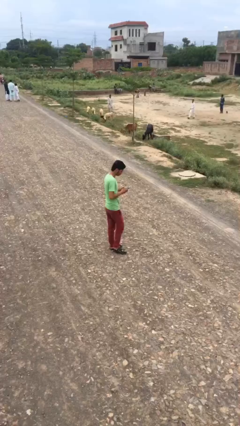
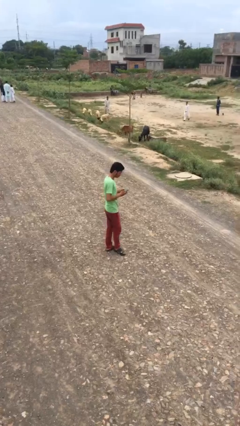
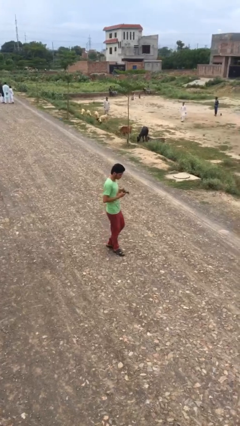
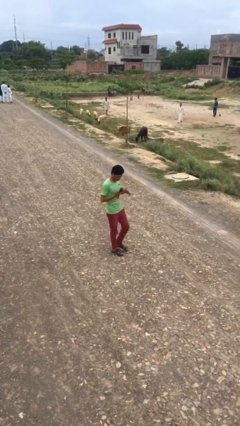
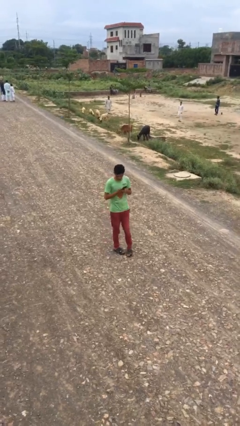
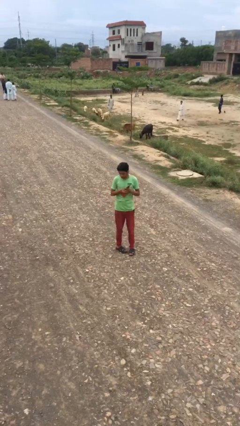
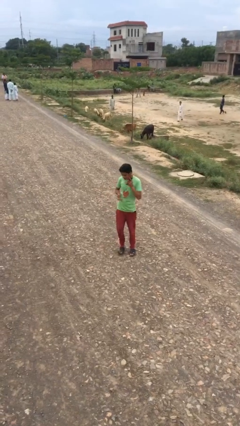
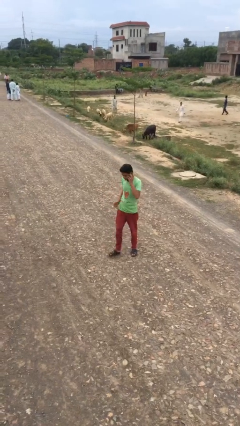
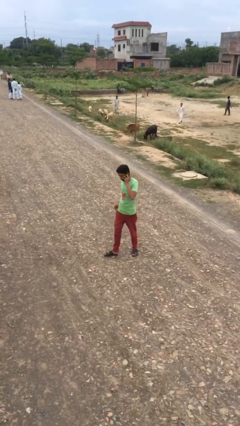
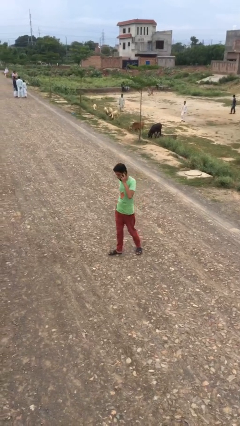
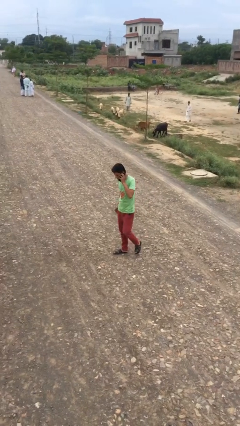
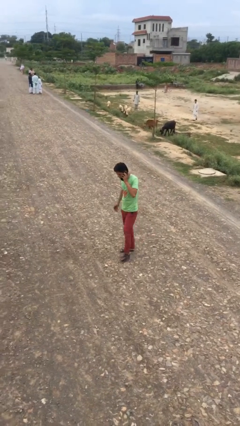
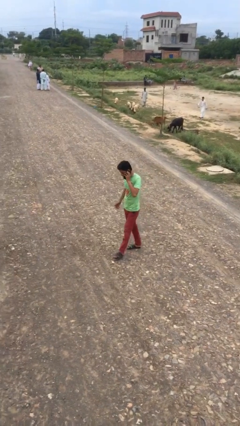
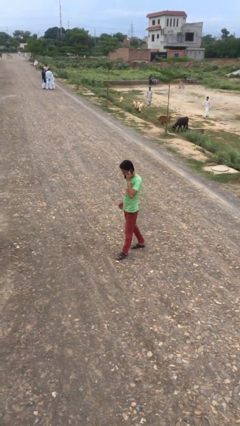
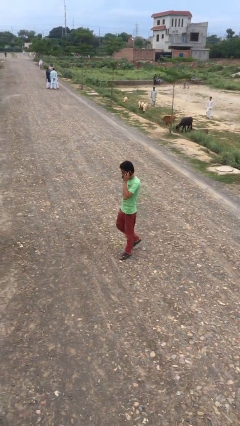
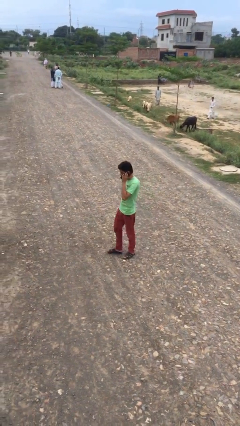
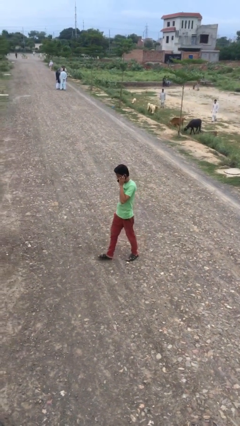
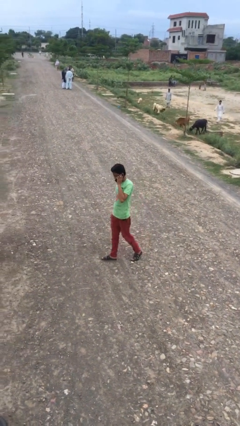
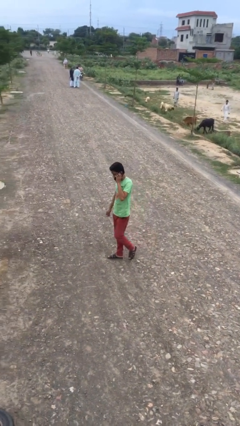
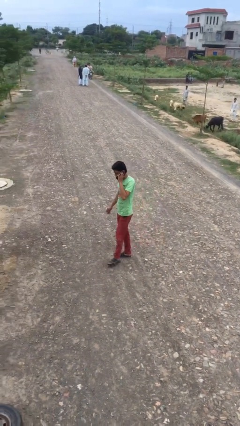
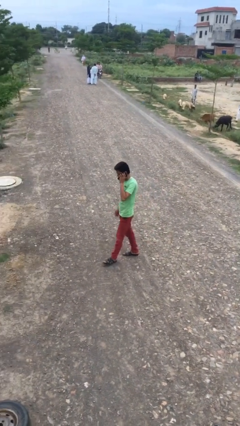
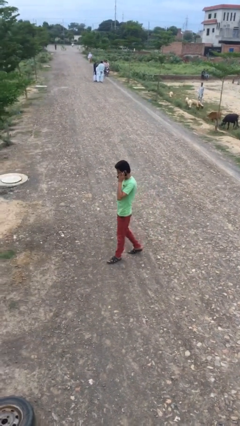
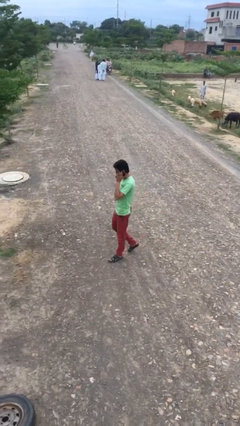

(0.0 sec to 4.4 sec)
person talks on phone

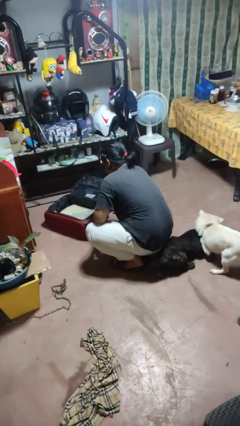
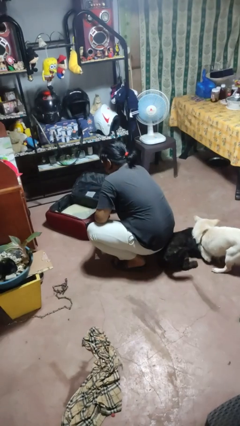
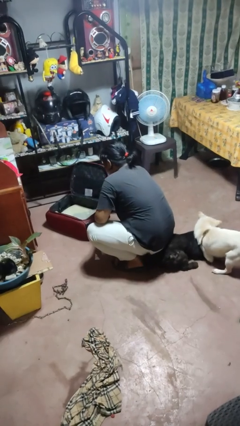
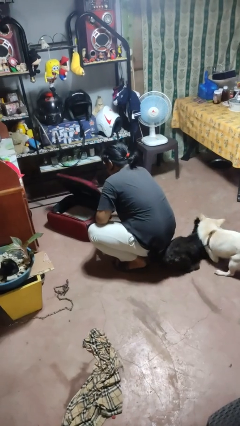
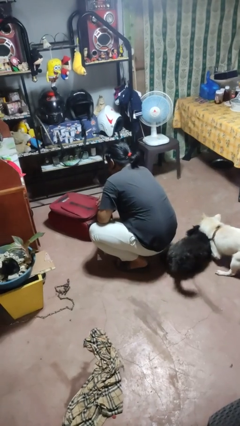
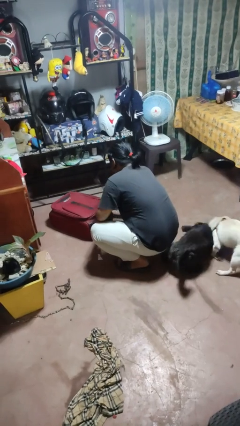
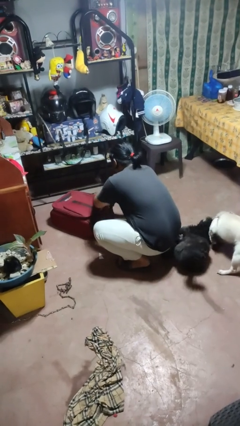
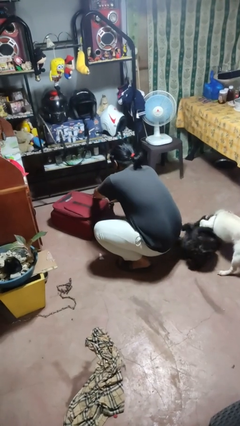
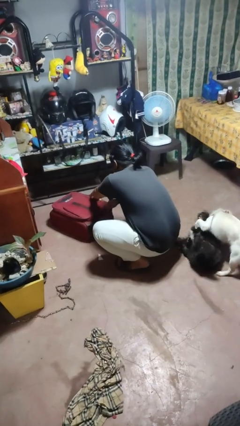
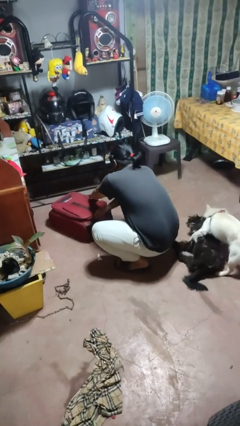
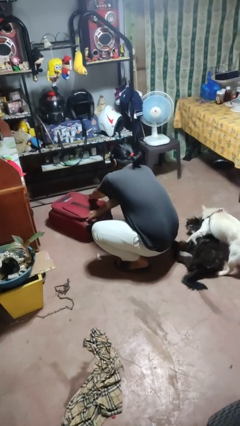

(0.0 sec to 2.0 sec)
person closes suitcase

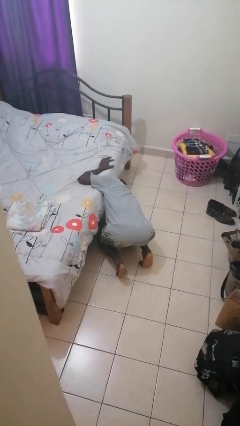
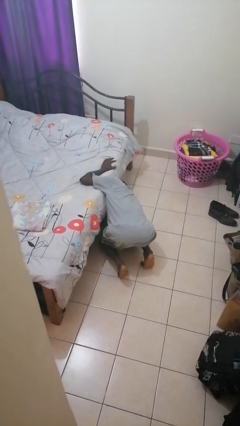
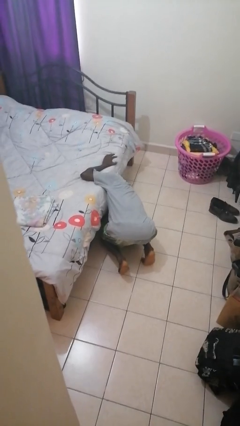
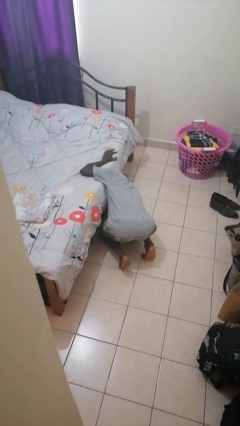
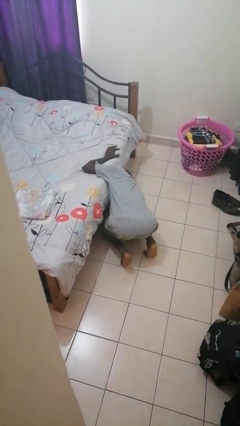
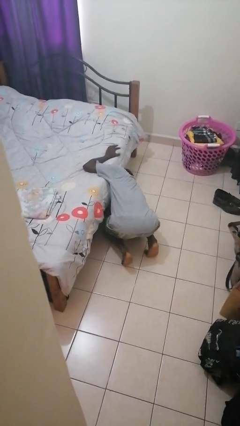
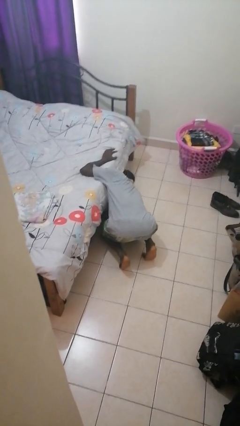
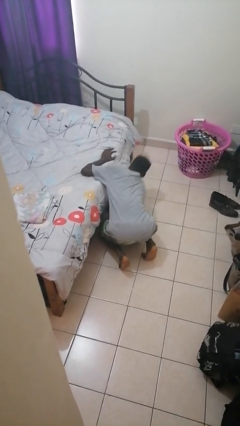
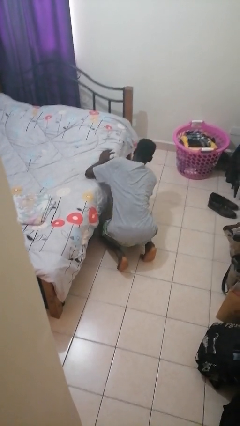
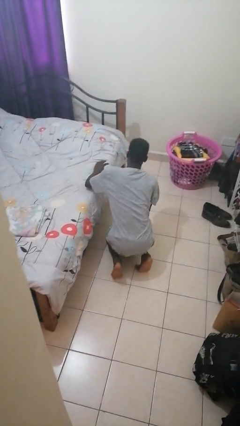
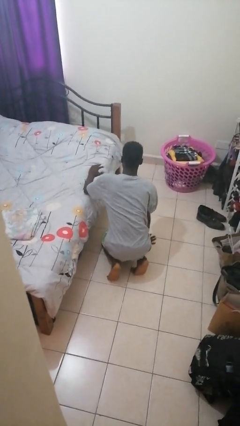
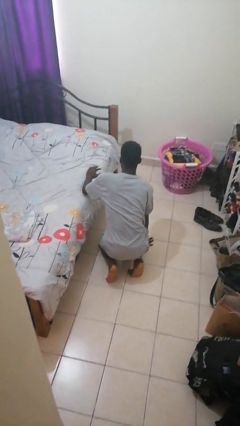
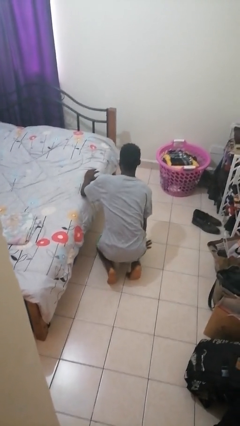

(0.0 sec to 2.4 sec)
person searches under bed

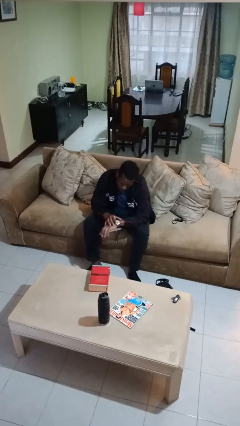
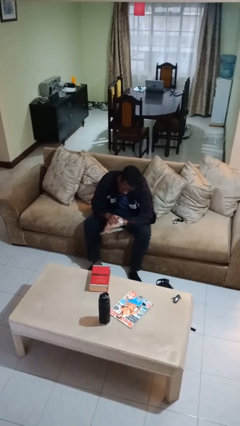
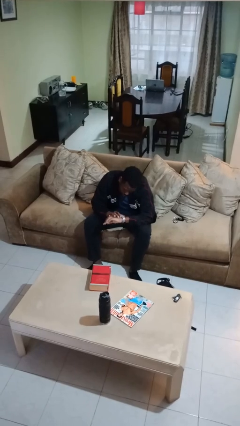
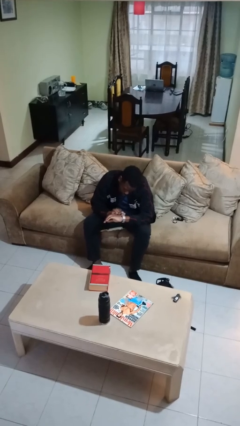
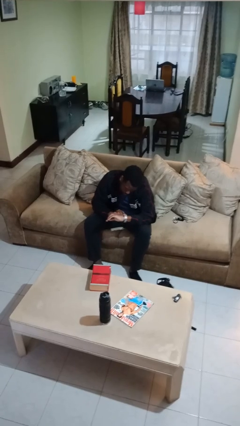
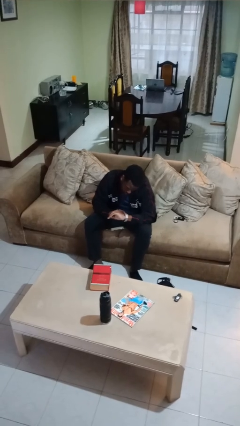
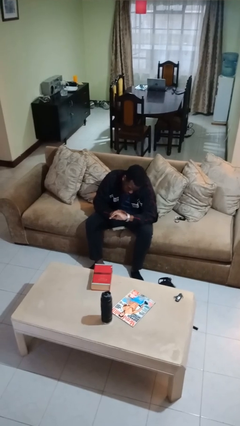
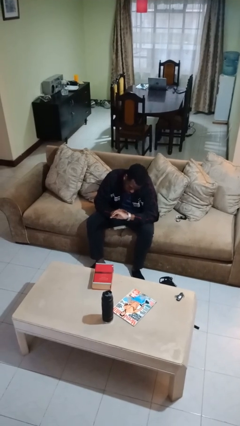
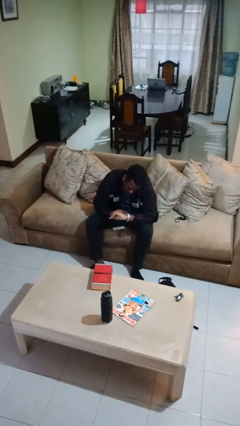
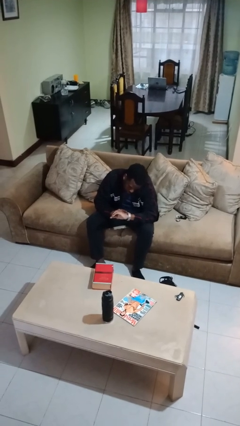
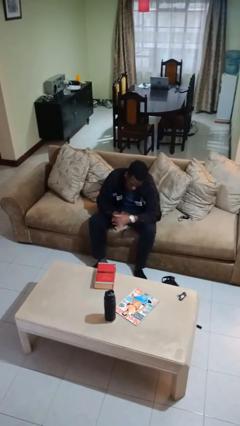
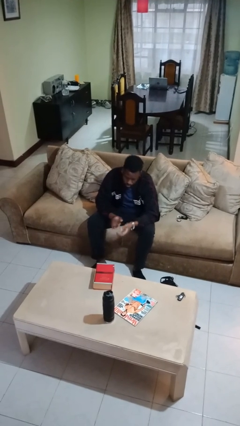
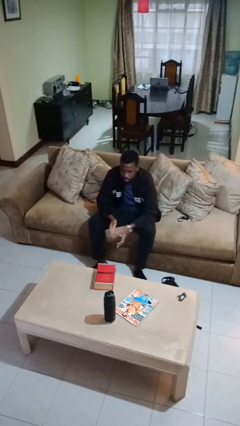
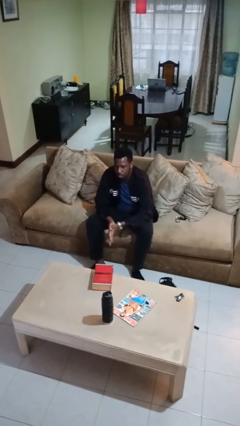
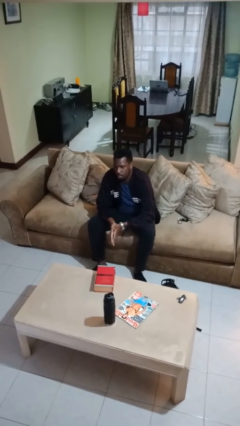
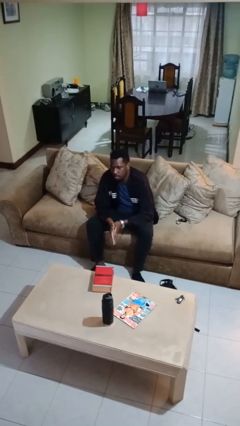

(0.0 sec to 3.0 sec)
person looks at wristwatch

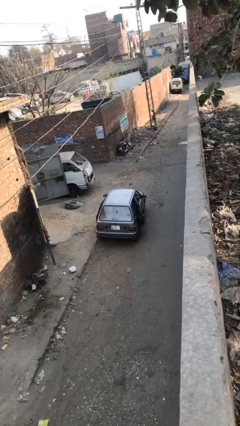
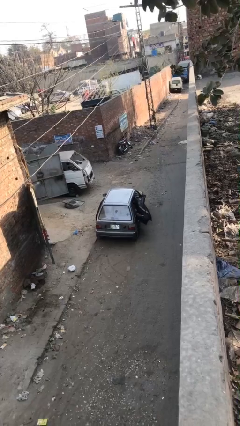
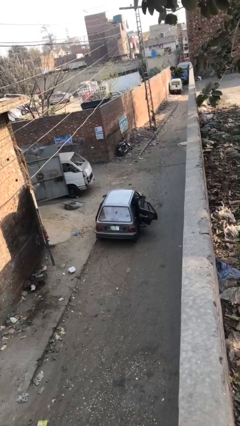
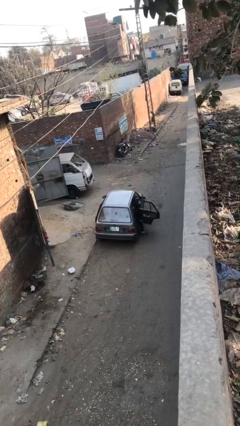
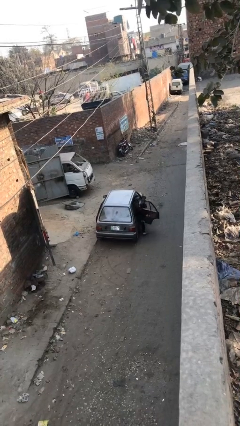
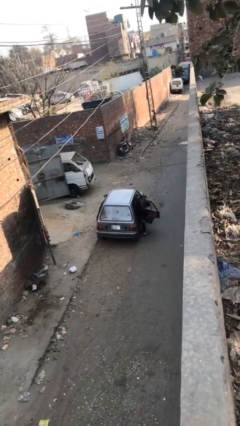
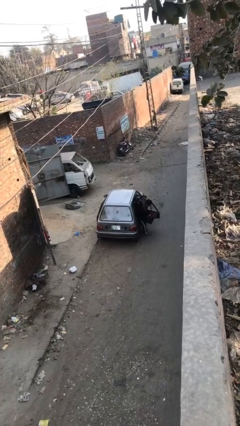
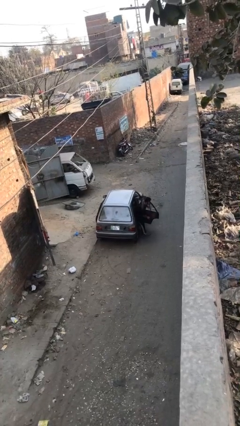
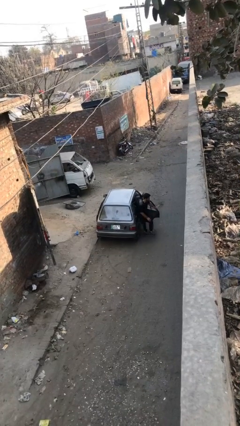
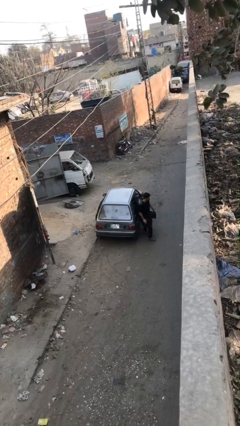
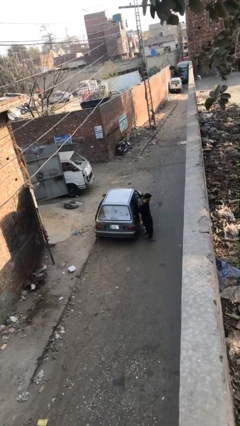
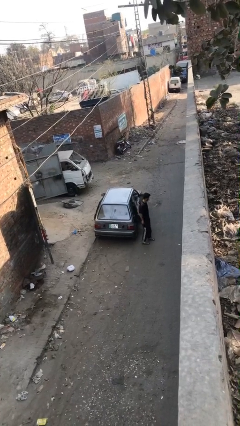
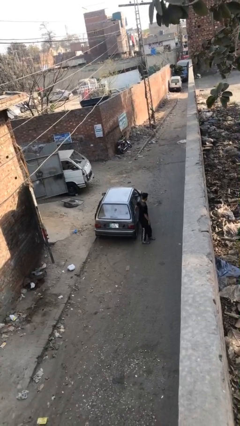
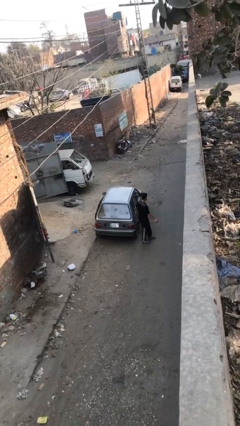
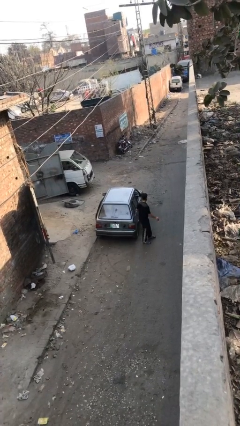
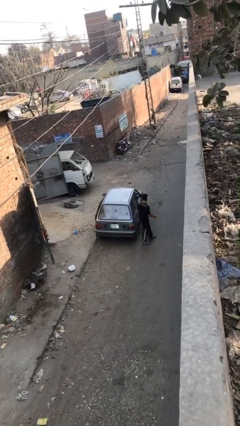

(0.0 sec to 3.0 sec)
car drops off person

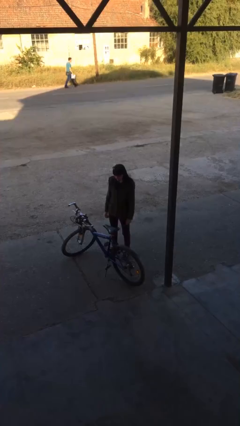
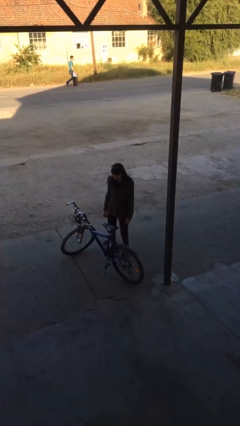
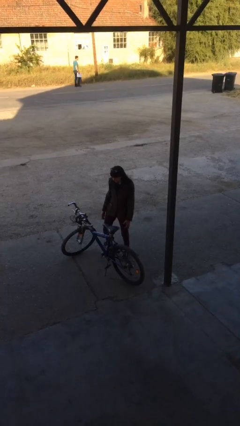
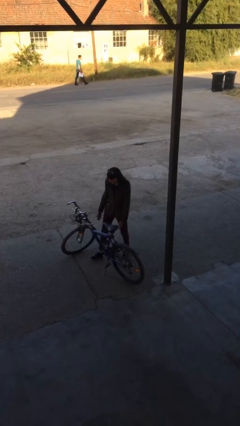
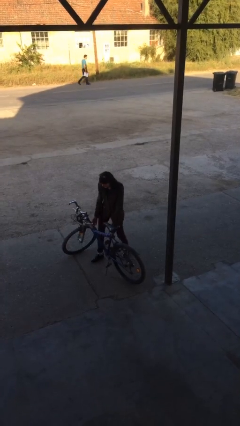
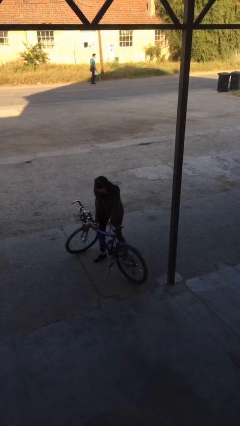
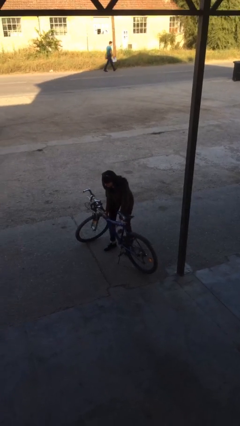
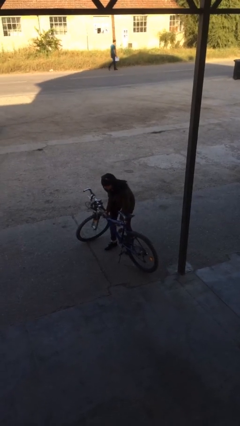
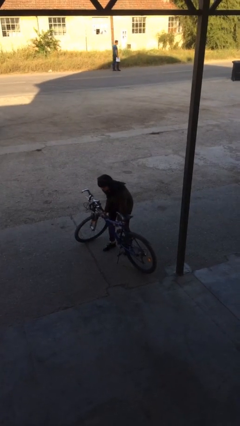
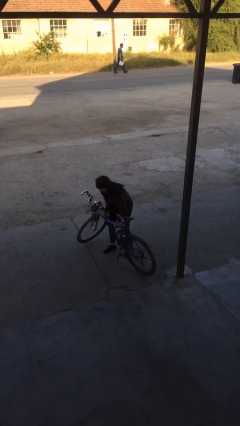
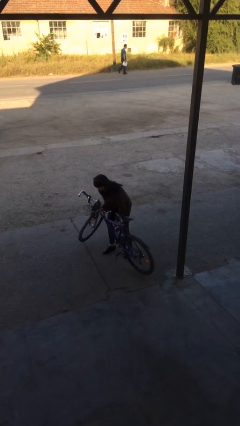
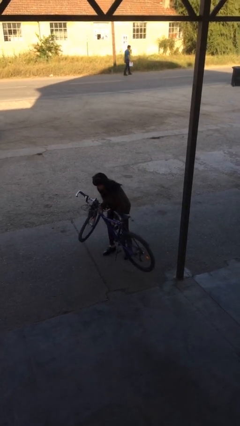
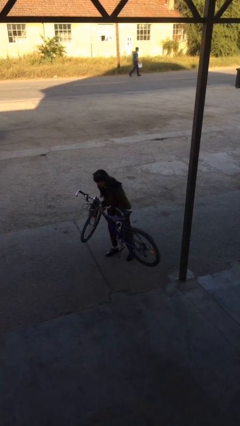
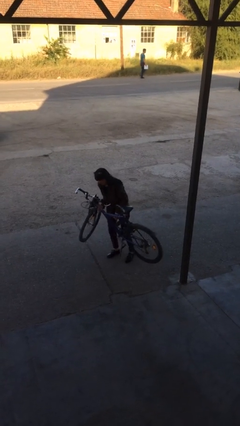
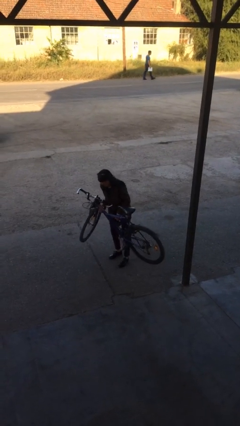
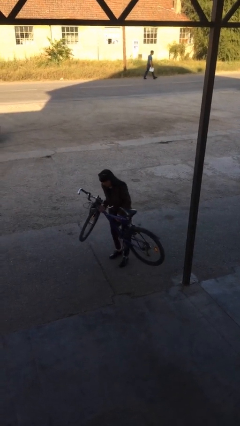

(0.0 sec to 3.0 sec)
person picks up object from floor
